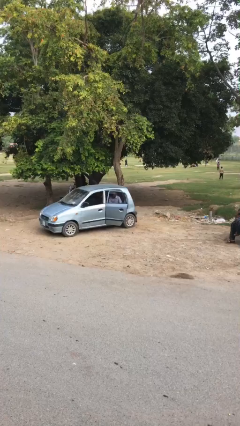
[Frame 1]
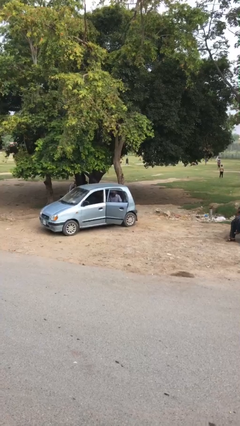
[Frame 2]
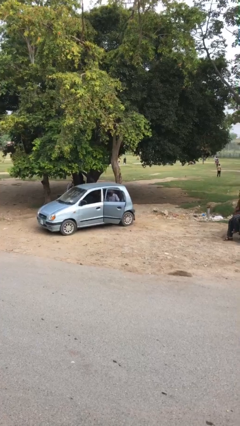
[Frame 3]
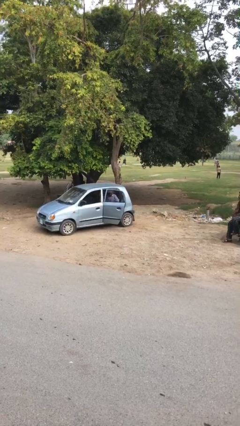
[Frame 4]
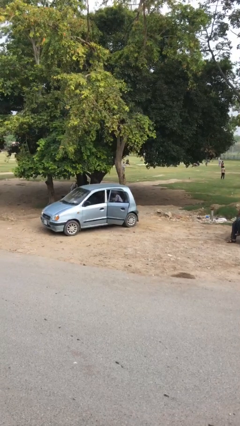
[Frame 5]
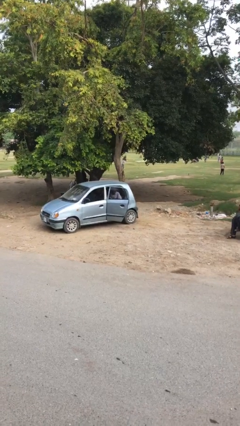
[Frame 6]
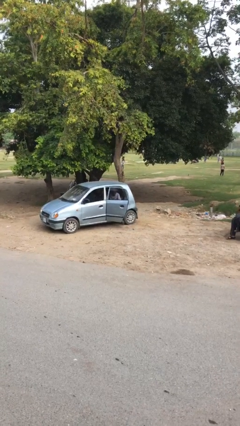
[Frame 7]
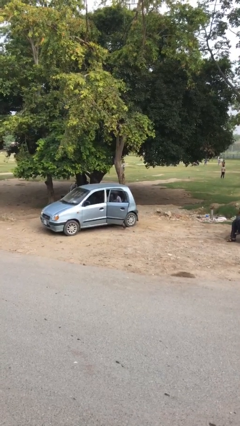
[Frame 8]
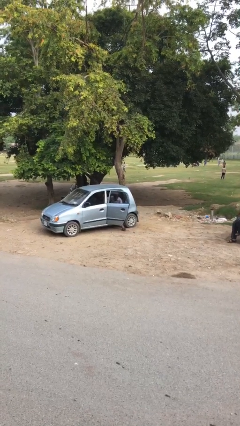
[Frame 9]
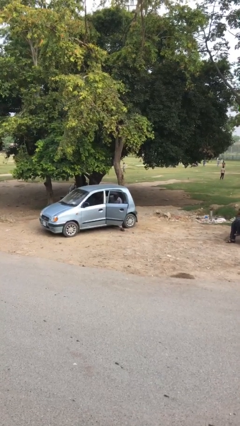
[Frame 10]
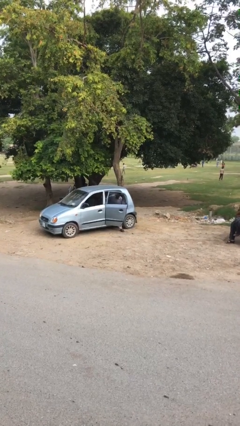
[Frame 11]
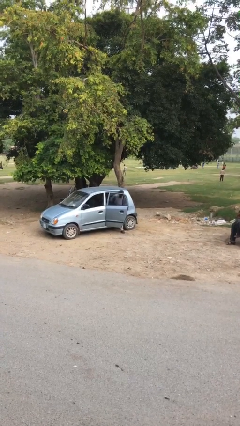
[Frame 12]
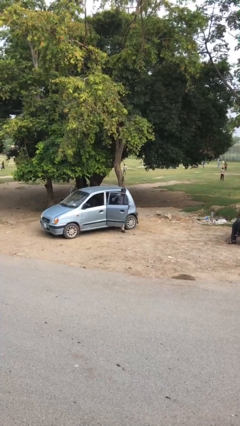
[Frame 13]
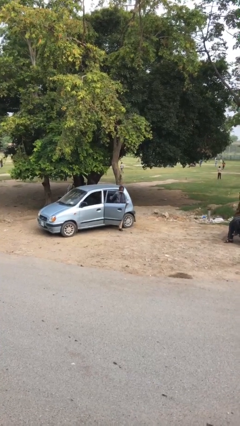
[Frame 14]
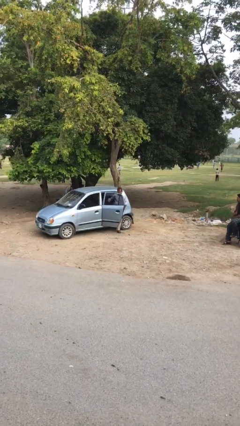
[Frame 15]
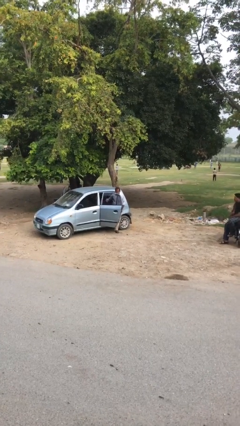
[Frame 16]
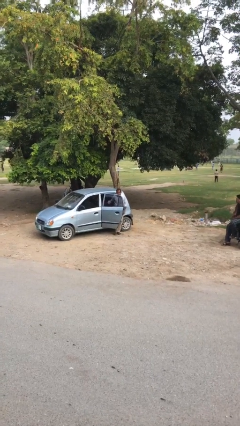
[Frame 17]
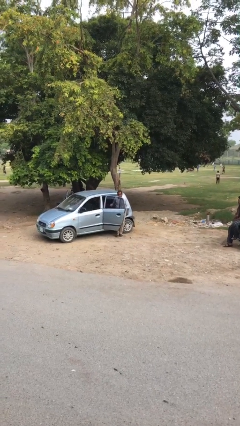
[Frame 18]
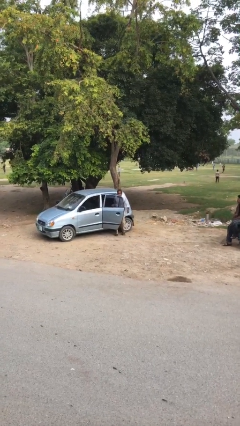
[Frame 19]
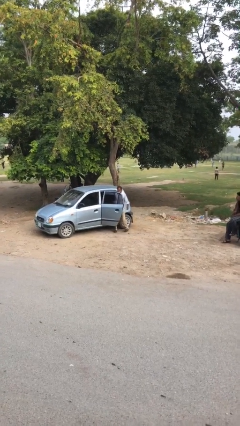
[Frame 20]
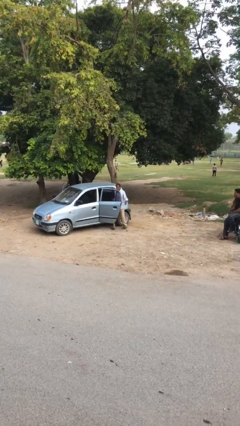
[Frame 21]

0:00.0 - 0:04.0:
person exits car

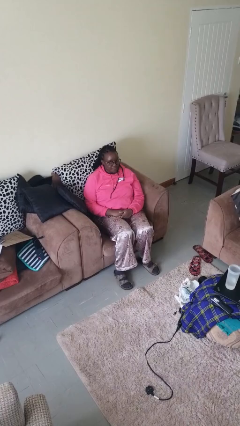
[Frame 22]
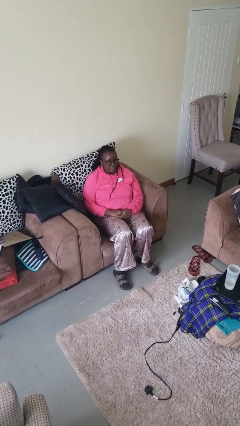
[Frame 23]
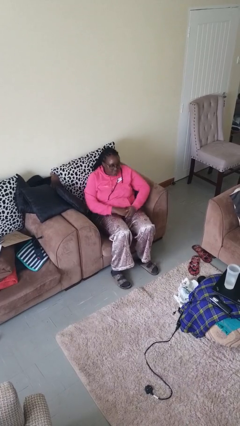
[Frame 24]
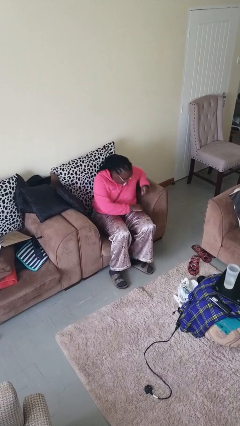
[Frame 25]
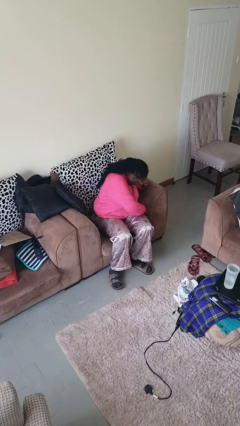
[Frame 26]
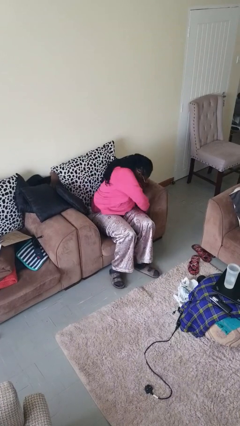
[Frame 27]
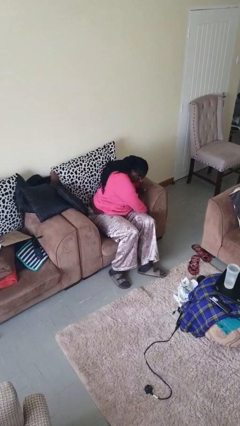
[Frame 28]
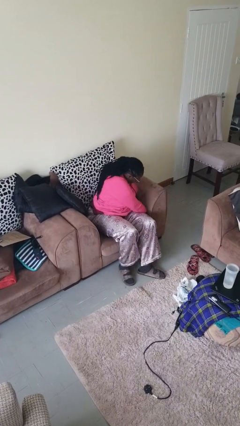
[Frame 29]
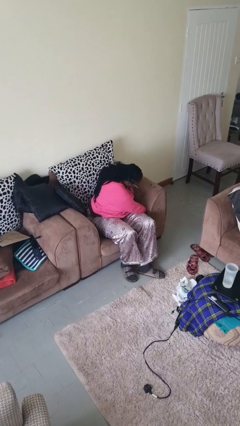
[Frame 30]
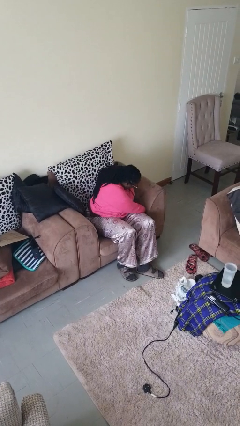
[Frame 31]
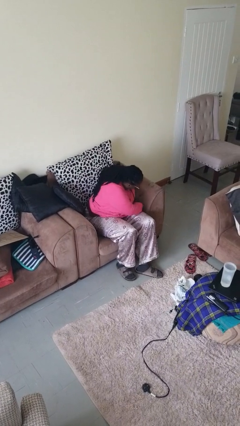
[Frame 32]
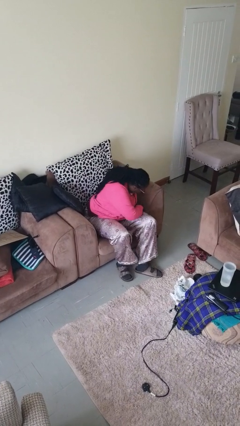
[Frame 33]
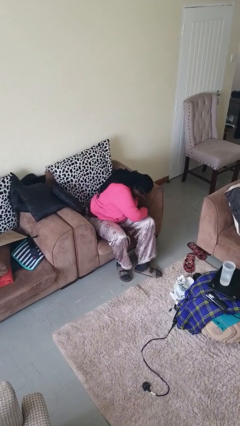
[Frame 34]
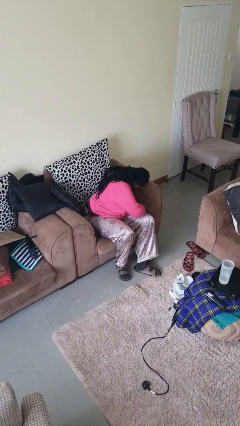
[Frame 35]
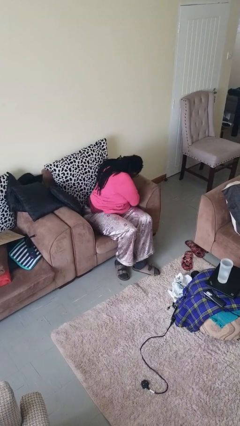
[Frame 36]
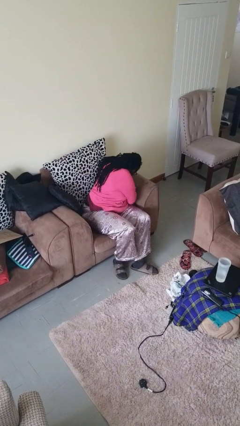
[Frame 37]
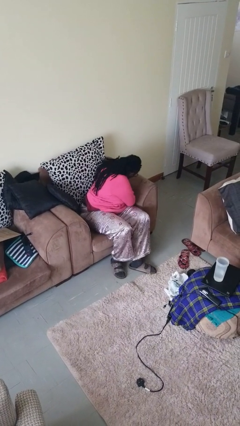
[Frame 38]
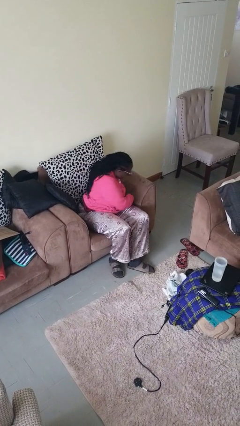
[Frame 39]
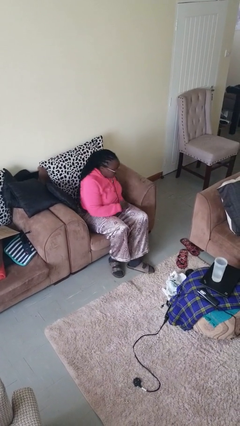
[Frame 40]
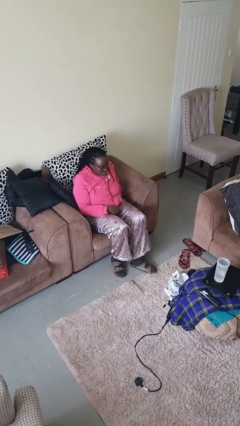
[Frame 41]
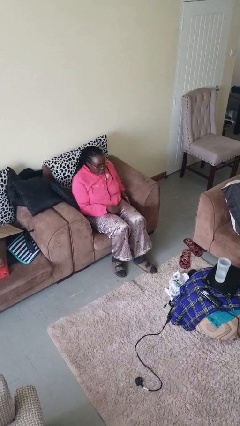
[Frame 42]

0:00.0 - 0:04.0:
person searches in couch

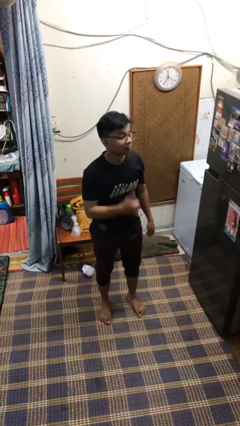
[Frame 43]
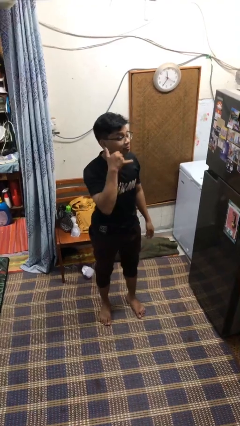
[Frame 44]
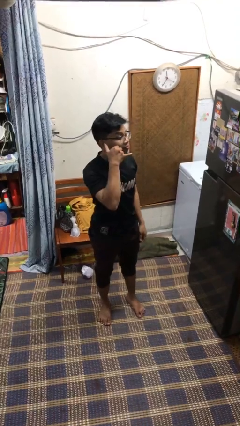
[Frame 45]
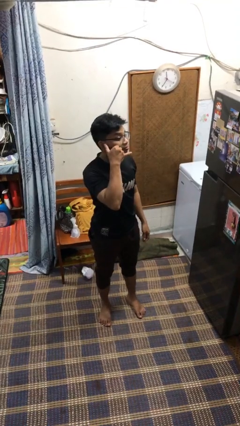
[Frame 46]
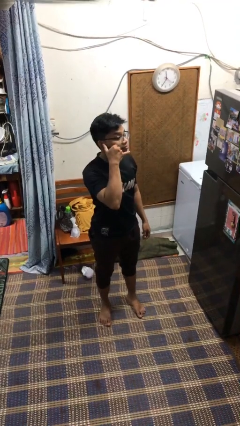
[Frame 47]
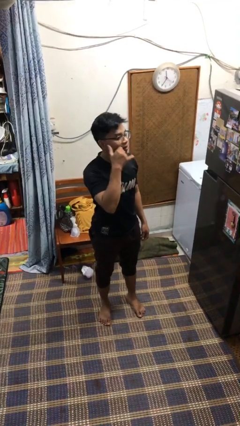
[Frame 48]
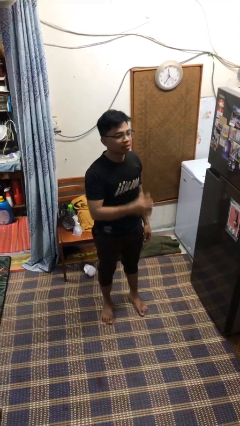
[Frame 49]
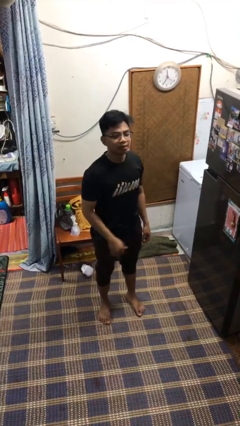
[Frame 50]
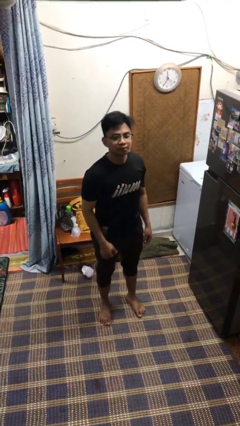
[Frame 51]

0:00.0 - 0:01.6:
person gestures call me

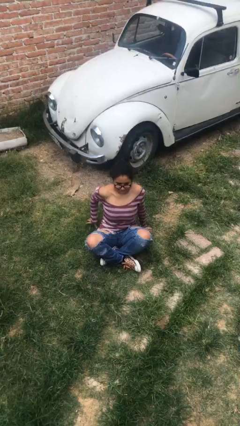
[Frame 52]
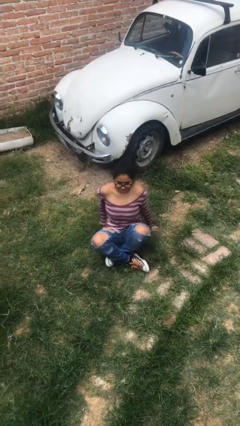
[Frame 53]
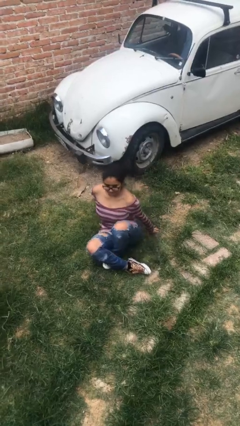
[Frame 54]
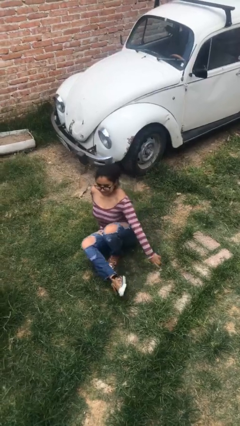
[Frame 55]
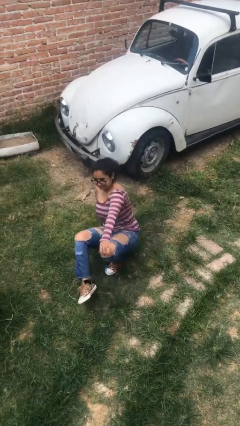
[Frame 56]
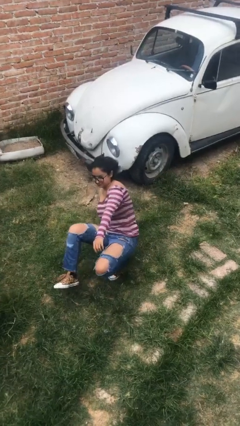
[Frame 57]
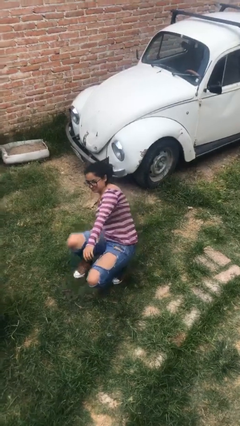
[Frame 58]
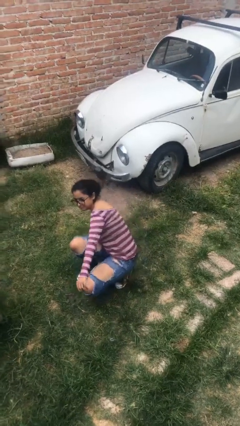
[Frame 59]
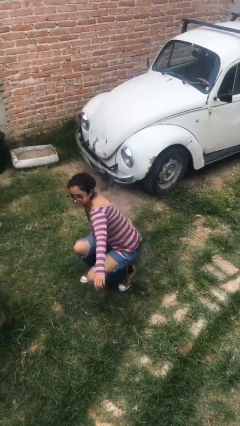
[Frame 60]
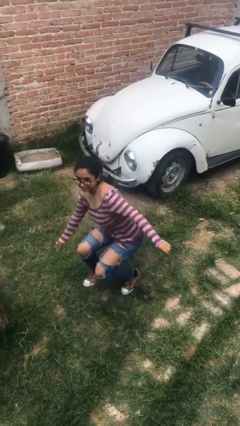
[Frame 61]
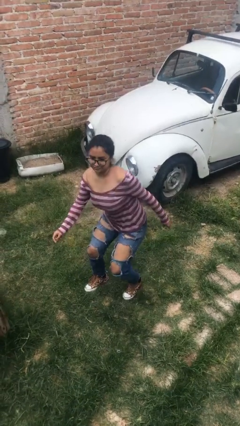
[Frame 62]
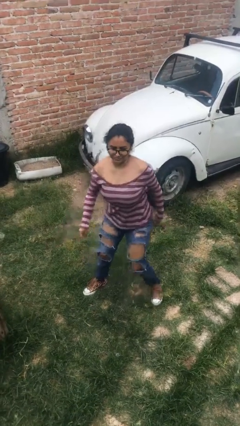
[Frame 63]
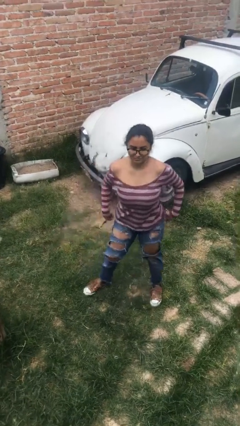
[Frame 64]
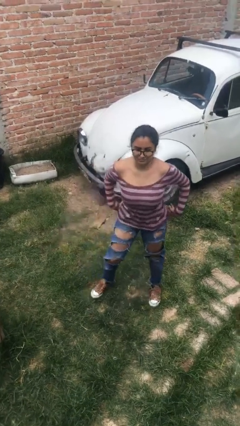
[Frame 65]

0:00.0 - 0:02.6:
person stands up from floor

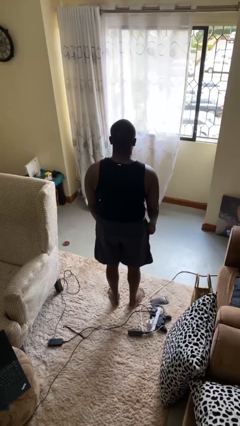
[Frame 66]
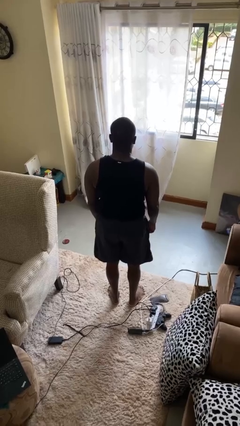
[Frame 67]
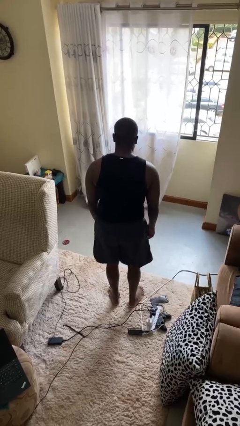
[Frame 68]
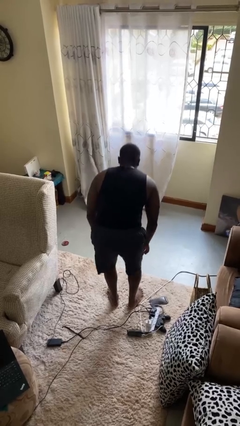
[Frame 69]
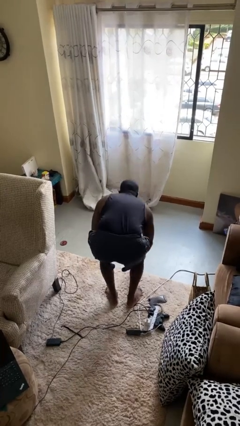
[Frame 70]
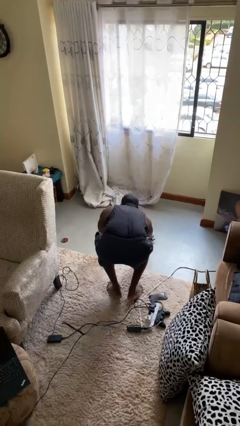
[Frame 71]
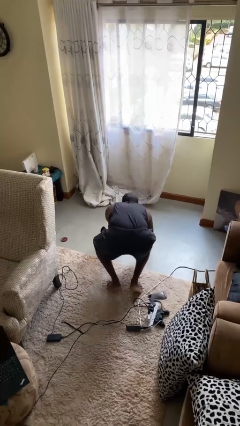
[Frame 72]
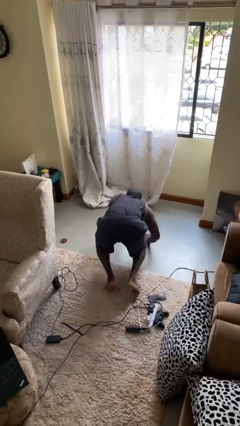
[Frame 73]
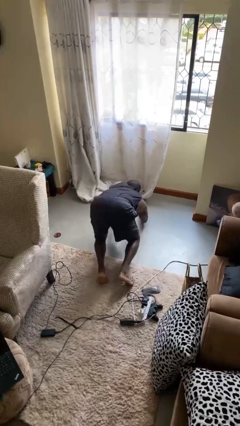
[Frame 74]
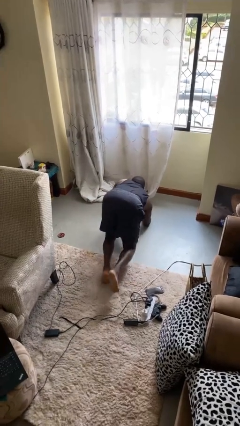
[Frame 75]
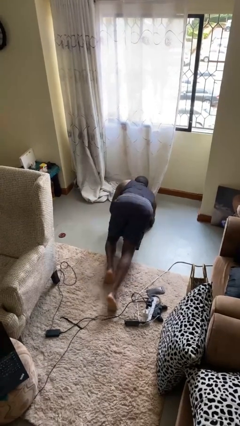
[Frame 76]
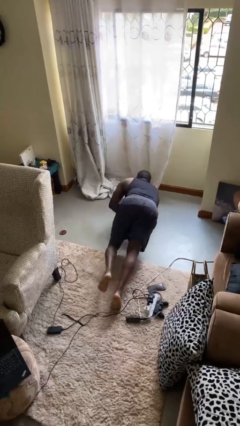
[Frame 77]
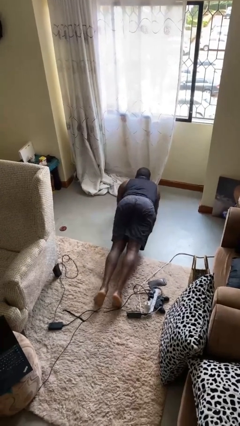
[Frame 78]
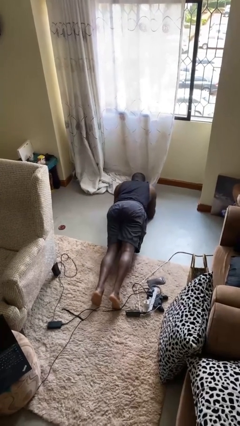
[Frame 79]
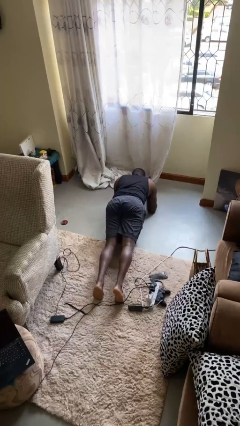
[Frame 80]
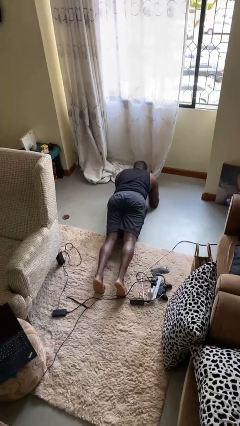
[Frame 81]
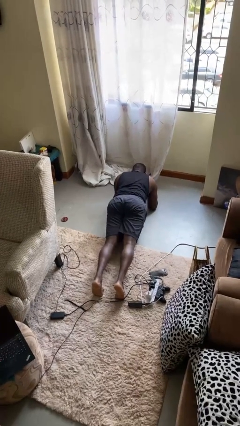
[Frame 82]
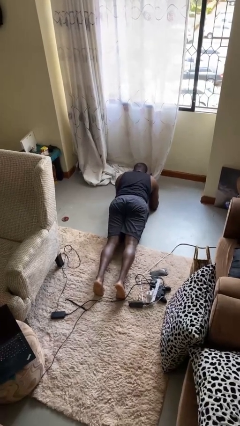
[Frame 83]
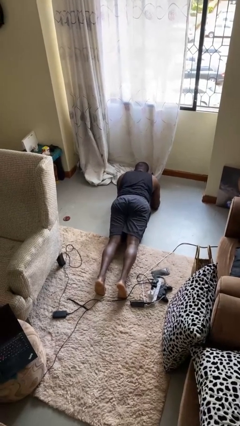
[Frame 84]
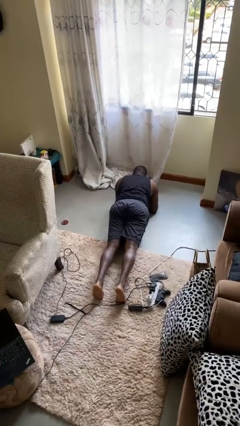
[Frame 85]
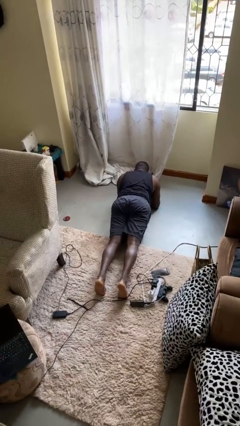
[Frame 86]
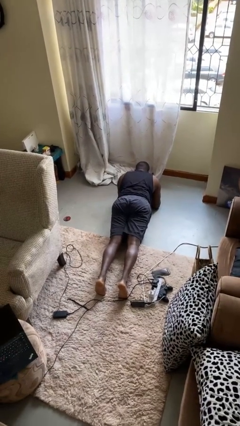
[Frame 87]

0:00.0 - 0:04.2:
person exercises with plank

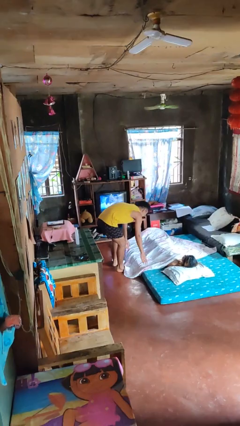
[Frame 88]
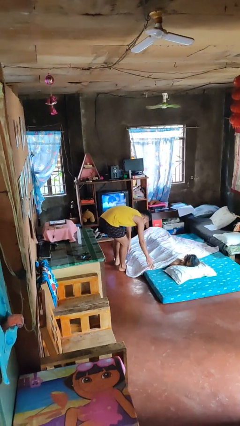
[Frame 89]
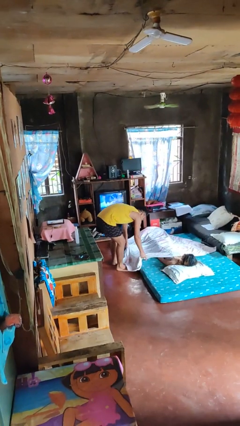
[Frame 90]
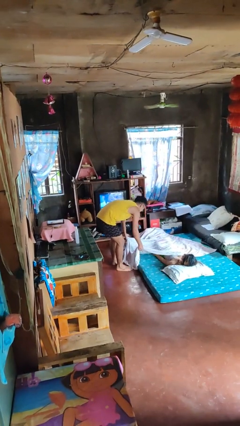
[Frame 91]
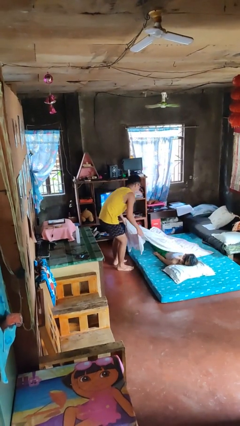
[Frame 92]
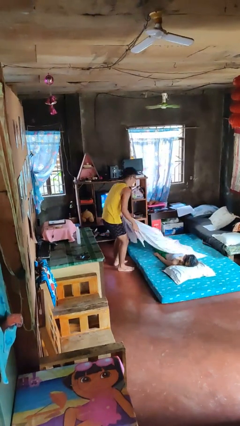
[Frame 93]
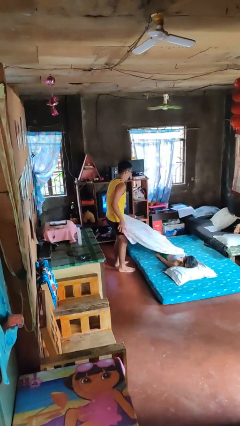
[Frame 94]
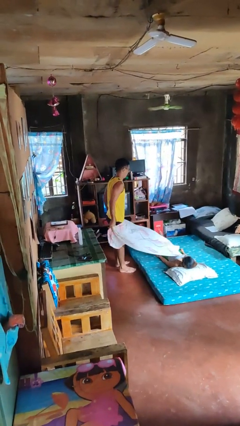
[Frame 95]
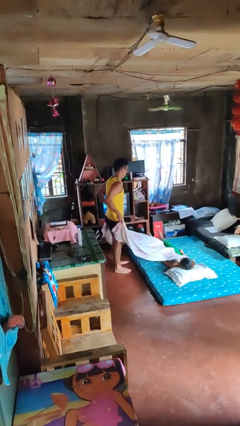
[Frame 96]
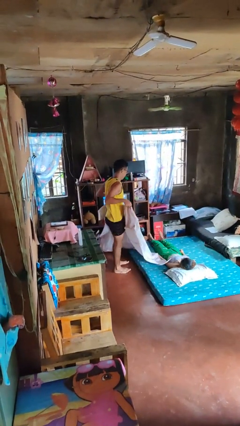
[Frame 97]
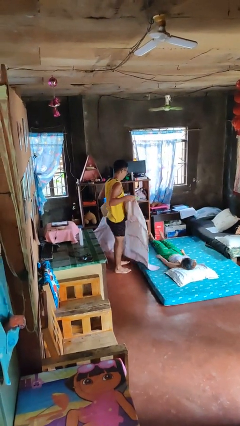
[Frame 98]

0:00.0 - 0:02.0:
person uncovers friend with blanket
